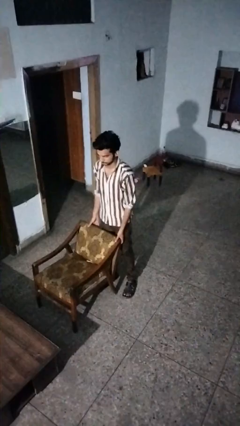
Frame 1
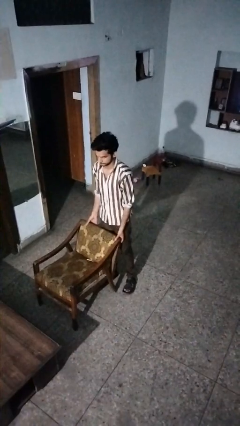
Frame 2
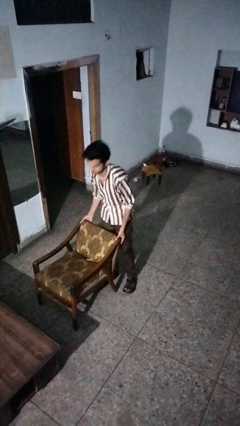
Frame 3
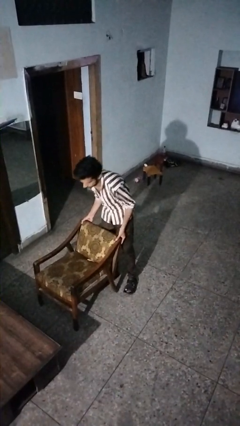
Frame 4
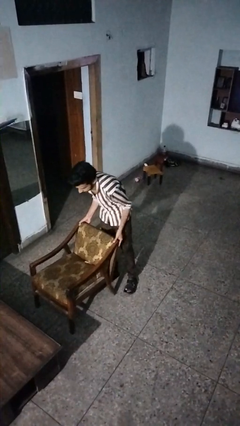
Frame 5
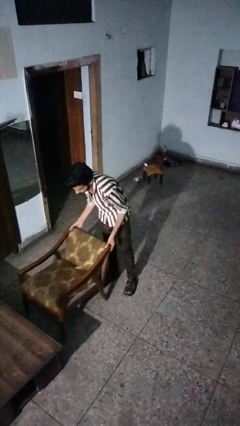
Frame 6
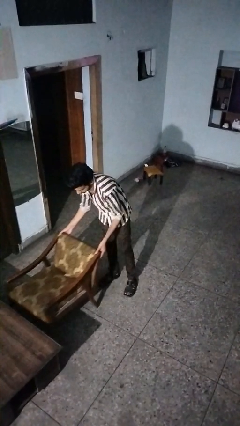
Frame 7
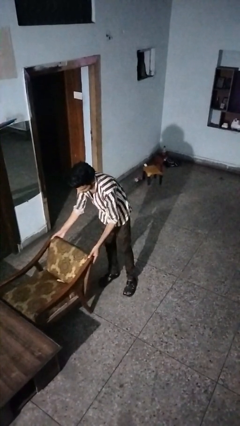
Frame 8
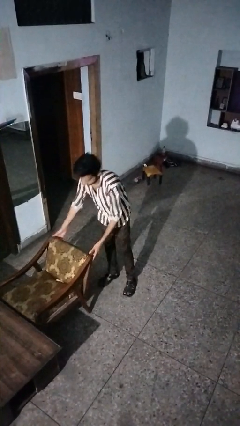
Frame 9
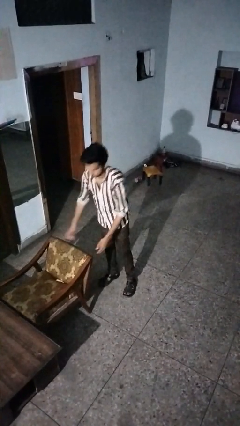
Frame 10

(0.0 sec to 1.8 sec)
person pushes in chair

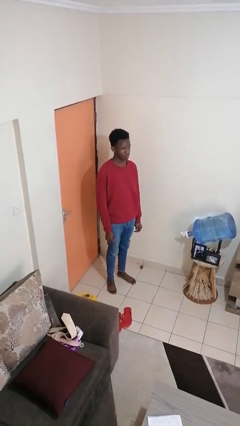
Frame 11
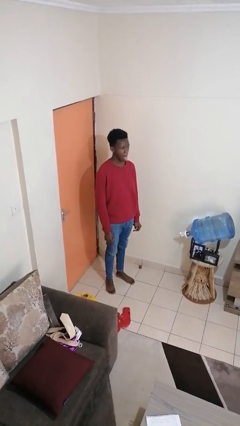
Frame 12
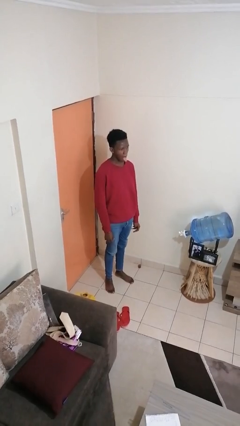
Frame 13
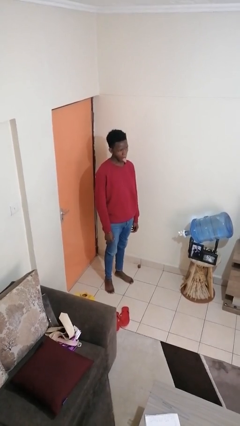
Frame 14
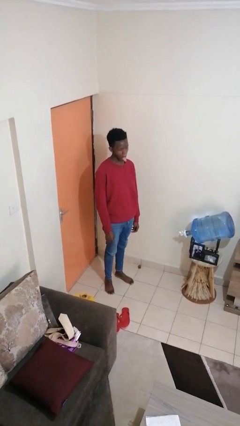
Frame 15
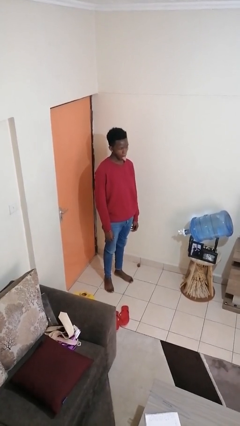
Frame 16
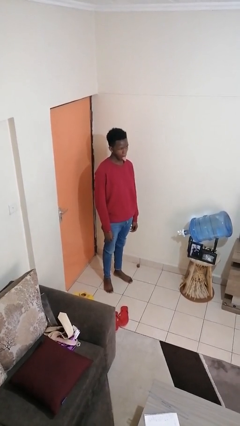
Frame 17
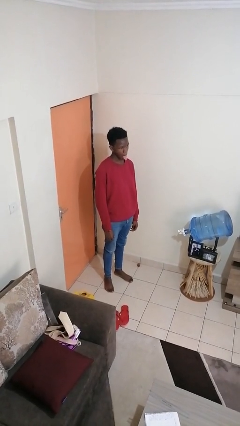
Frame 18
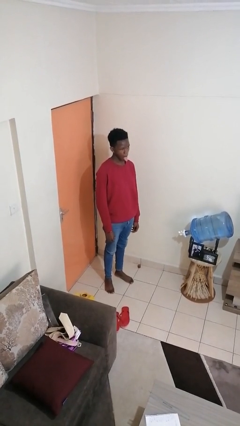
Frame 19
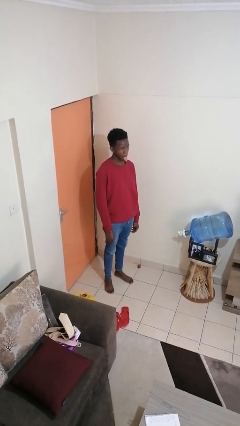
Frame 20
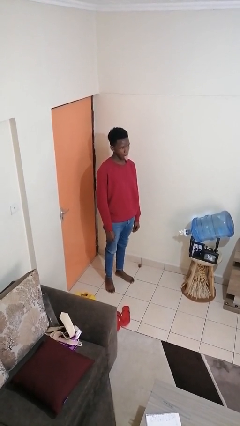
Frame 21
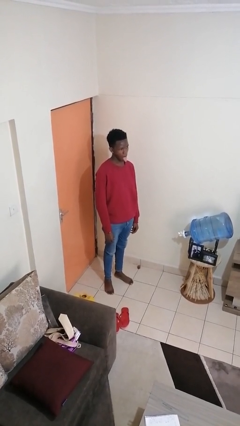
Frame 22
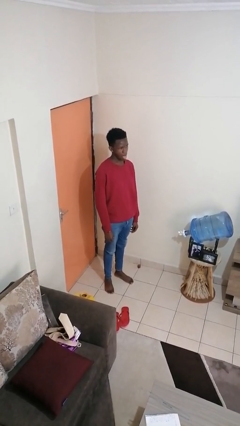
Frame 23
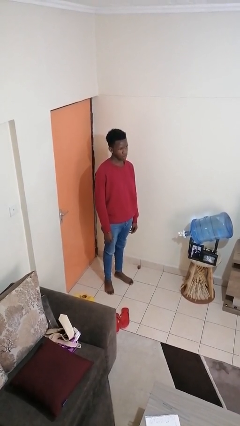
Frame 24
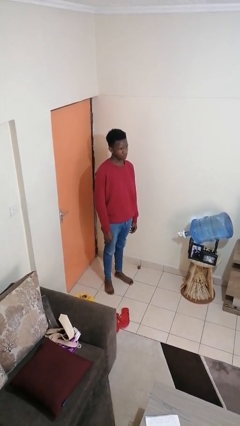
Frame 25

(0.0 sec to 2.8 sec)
person sticks out tongue

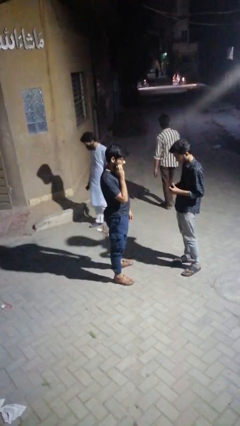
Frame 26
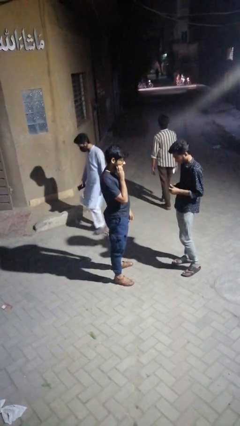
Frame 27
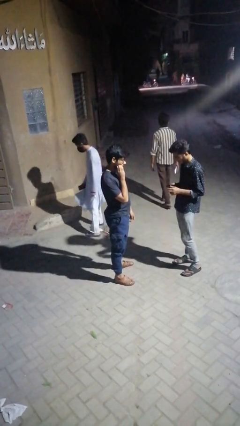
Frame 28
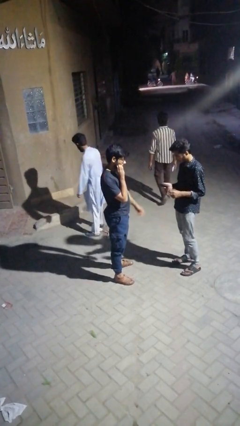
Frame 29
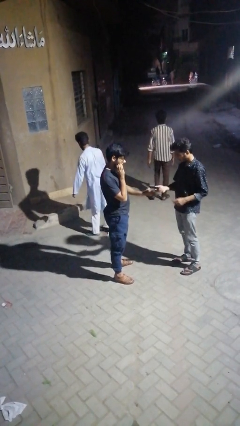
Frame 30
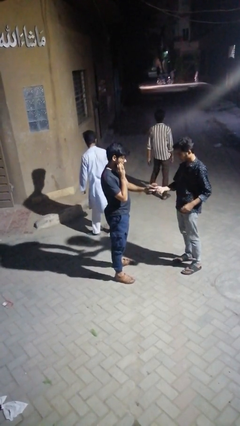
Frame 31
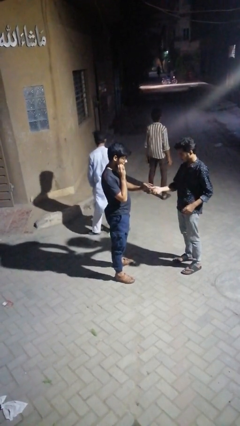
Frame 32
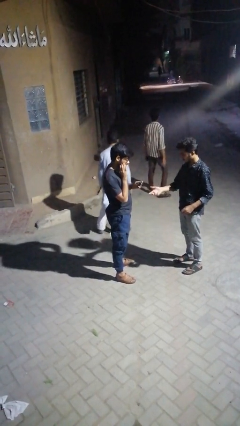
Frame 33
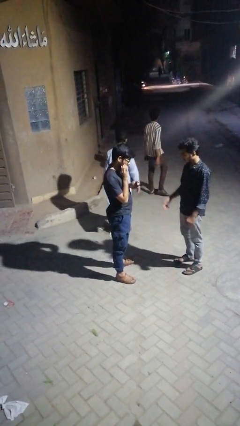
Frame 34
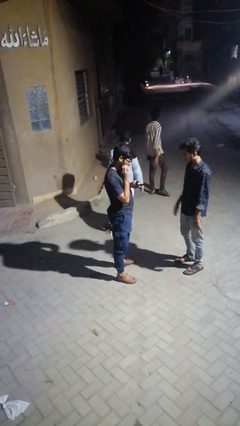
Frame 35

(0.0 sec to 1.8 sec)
person transfers object to person

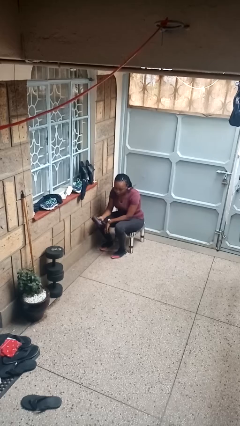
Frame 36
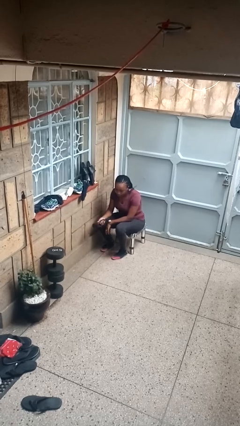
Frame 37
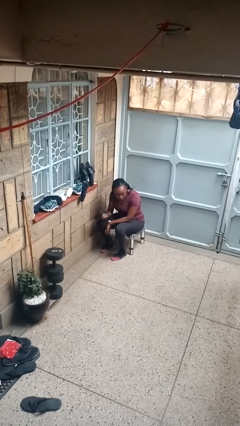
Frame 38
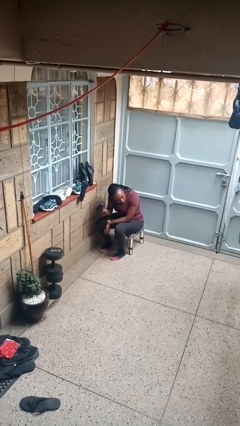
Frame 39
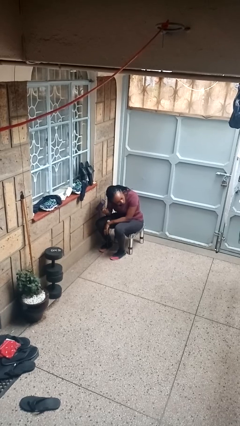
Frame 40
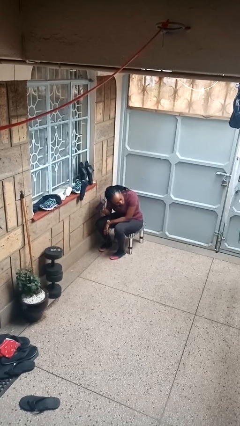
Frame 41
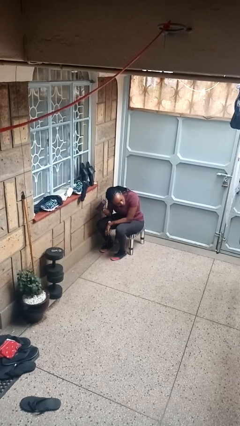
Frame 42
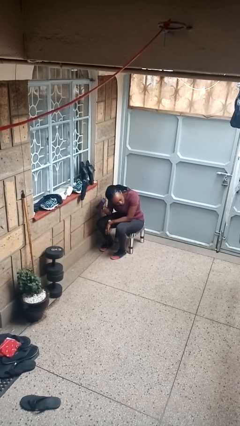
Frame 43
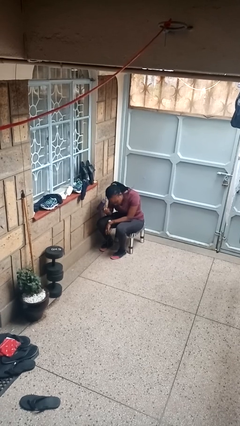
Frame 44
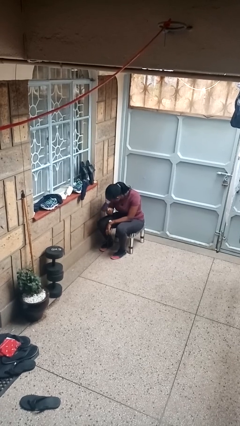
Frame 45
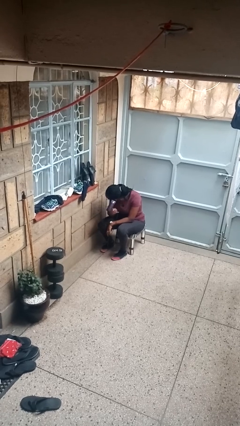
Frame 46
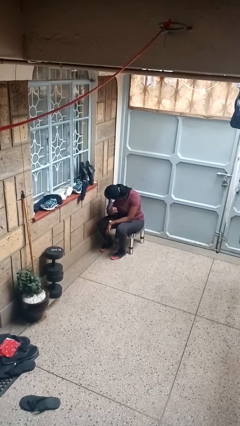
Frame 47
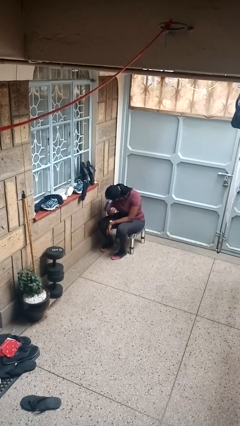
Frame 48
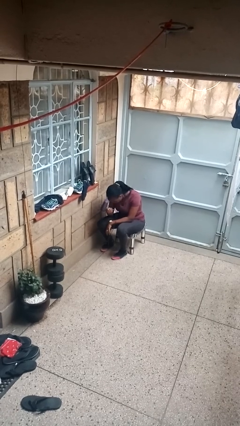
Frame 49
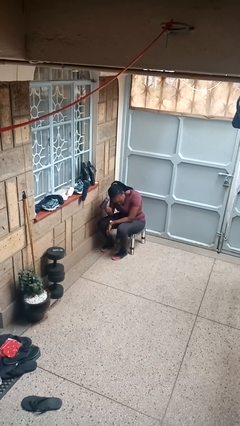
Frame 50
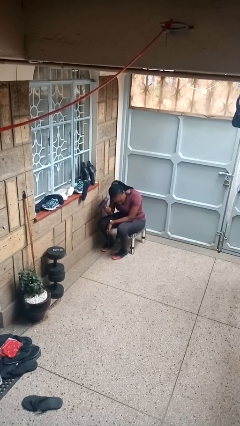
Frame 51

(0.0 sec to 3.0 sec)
person dries hair with hairdryer

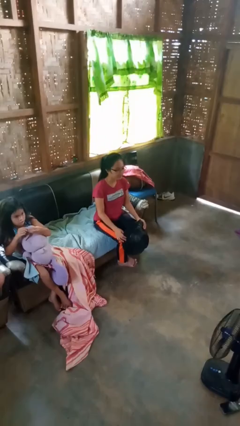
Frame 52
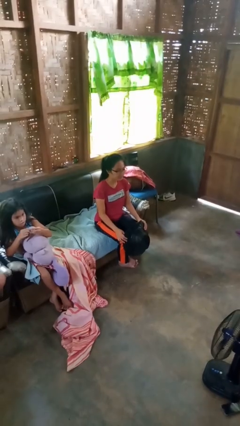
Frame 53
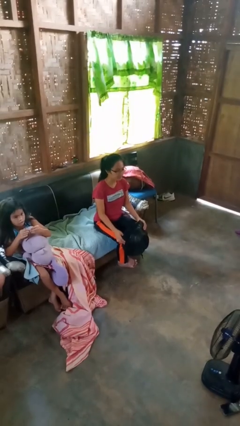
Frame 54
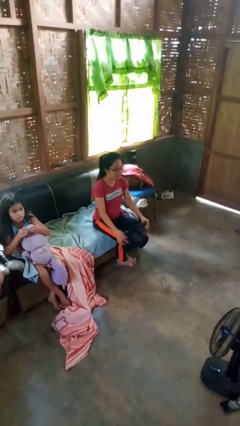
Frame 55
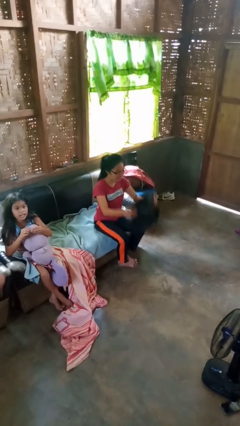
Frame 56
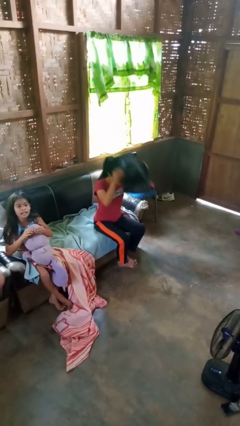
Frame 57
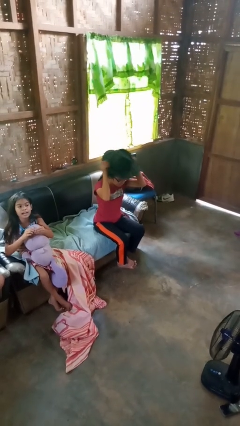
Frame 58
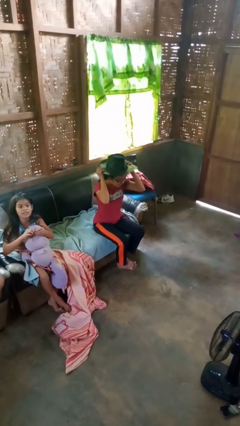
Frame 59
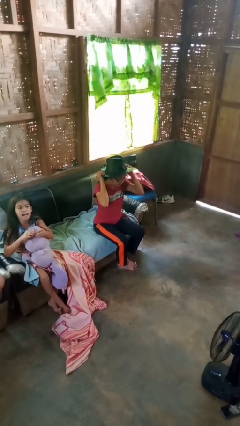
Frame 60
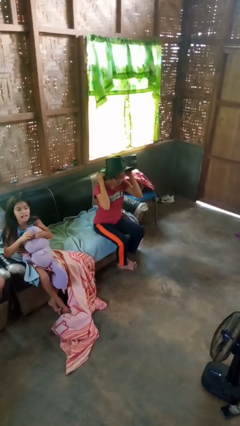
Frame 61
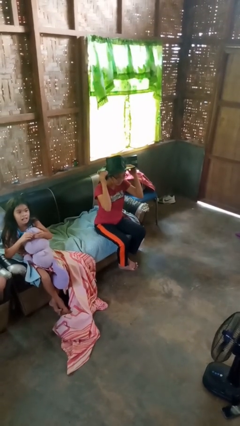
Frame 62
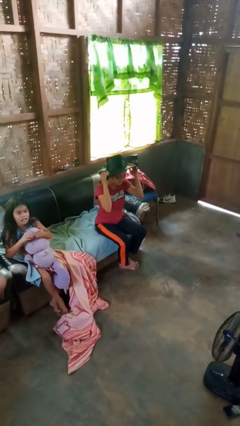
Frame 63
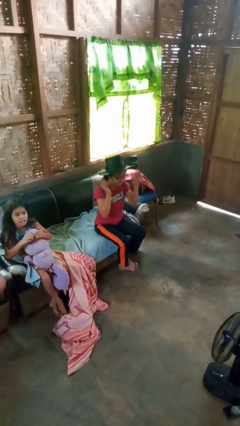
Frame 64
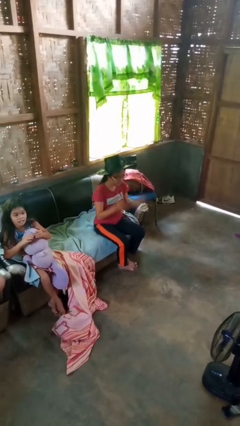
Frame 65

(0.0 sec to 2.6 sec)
person puts on hat

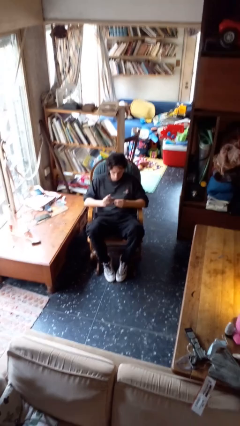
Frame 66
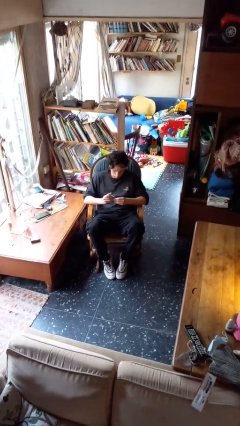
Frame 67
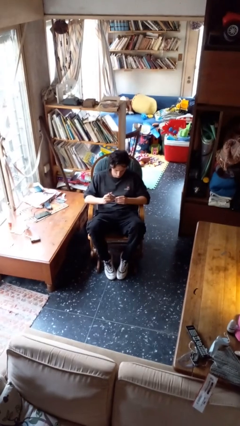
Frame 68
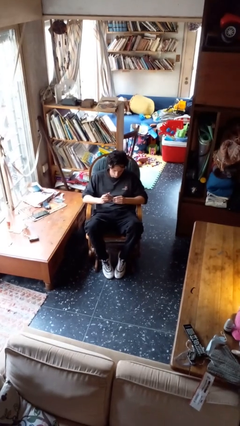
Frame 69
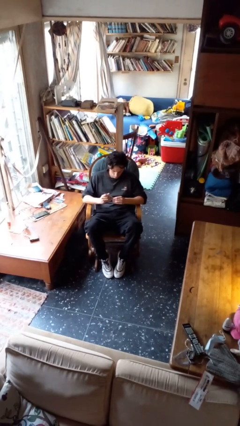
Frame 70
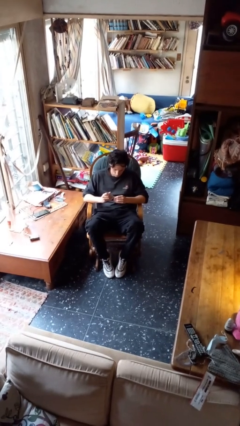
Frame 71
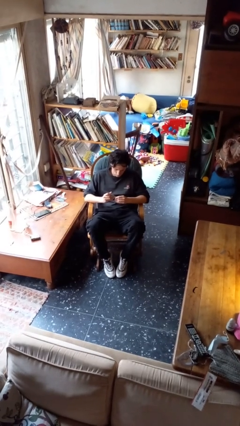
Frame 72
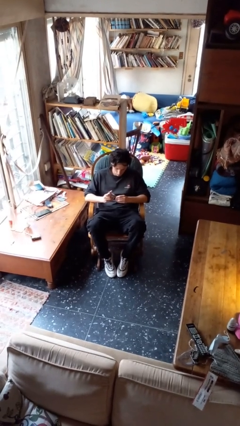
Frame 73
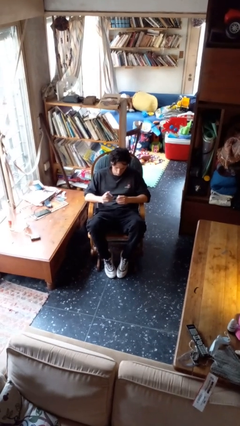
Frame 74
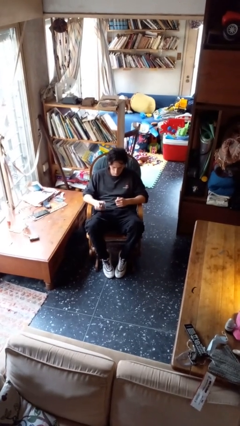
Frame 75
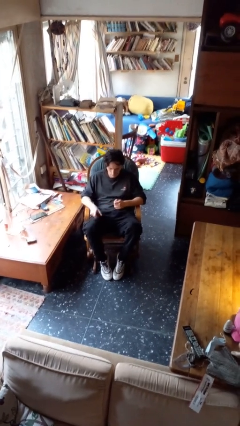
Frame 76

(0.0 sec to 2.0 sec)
person clips fingernails

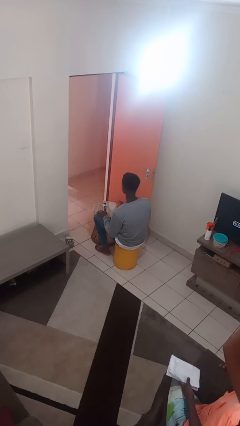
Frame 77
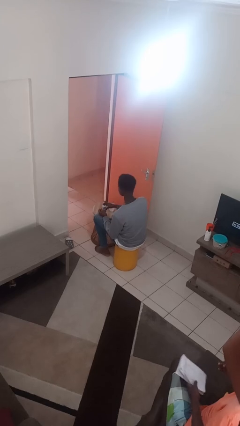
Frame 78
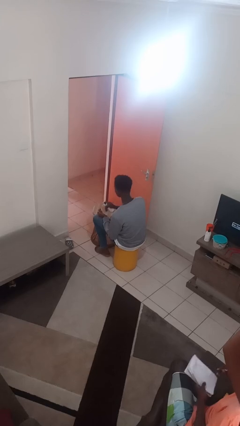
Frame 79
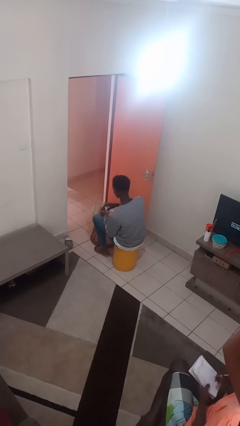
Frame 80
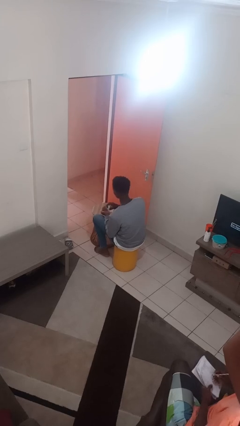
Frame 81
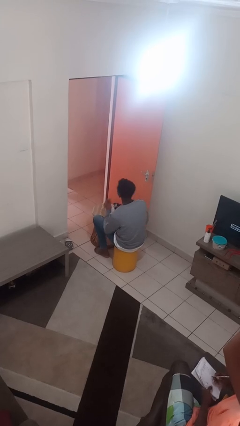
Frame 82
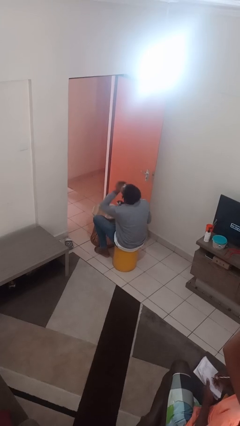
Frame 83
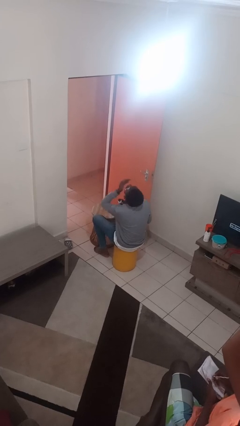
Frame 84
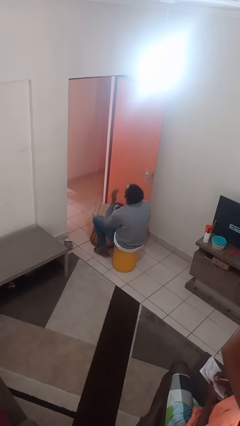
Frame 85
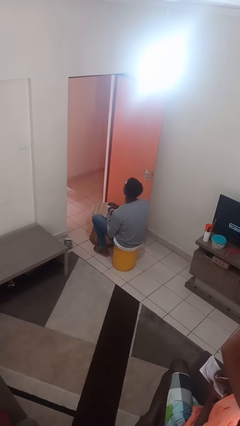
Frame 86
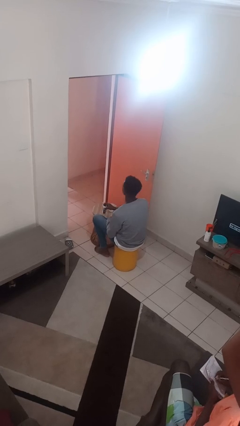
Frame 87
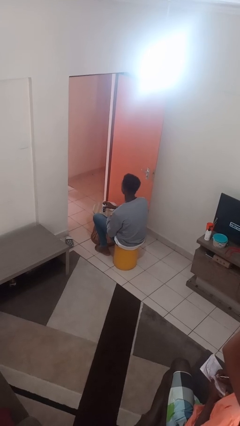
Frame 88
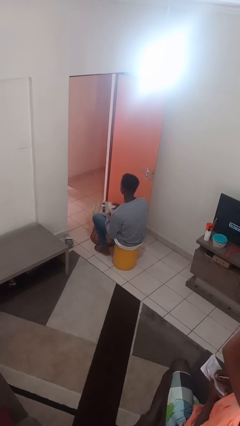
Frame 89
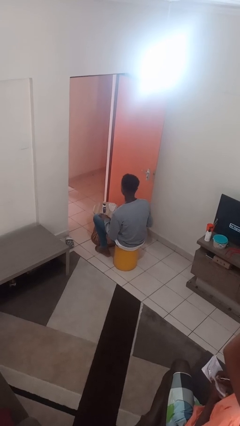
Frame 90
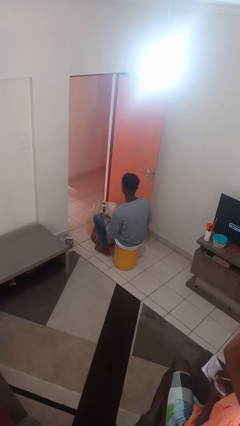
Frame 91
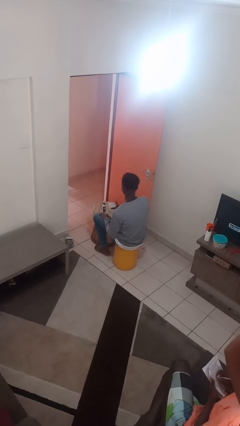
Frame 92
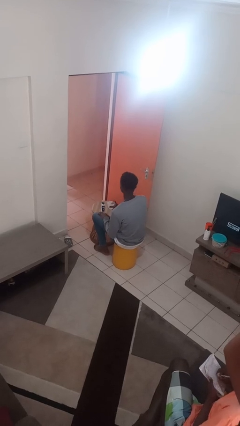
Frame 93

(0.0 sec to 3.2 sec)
person takes medicine pills
